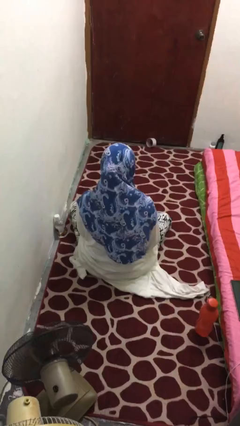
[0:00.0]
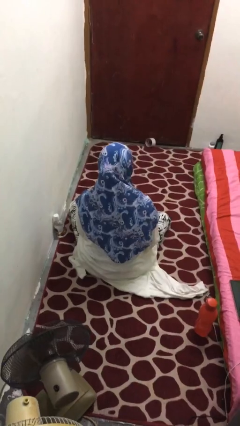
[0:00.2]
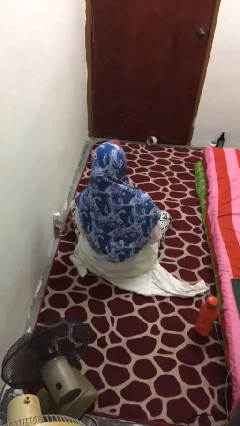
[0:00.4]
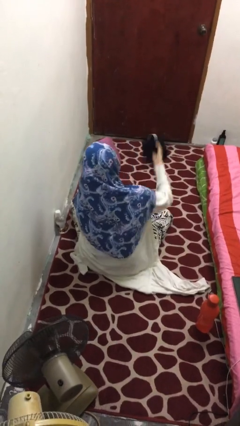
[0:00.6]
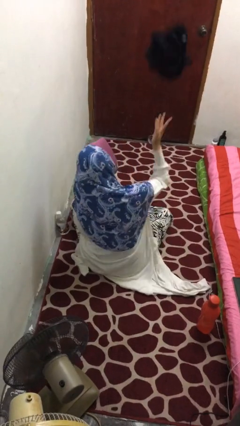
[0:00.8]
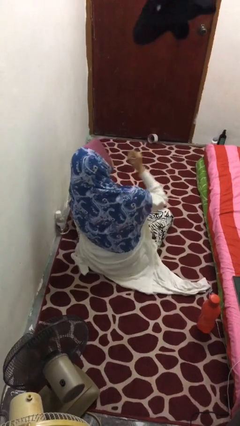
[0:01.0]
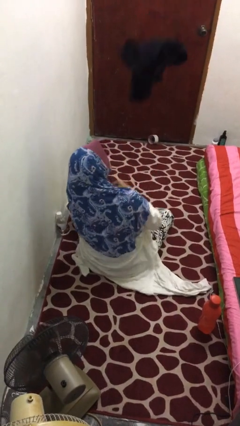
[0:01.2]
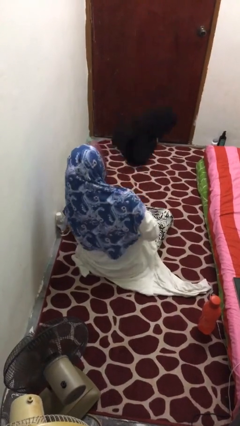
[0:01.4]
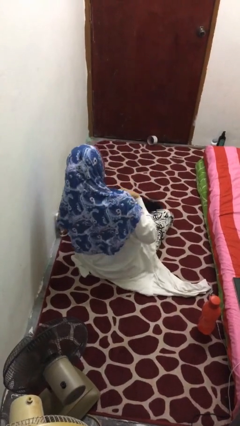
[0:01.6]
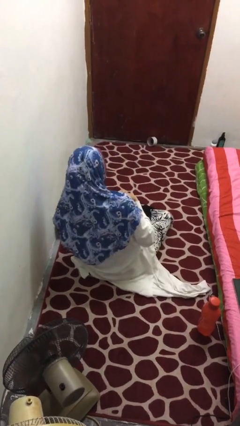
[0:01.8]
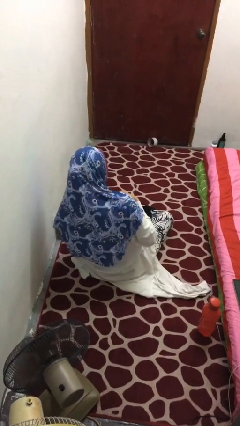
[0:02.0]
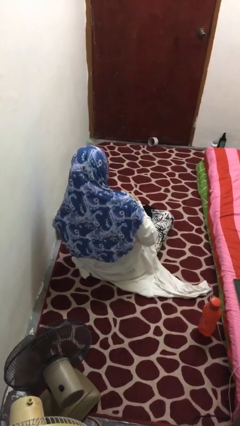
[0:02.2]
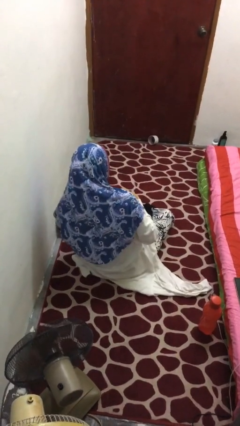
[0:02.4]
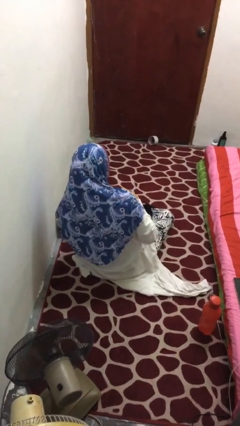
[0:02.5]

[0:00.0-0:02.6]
person throws object into air

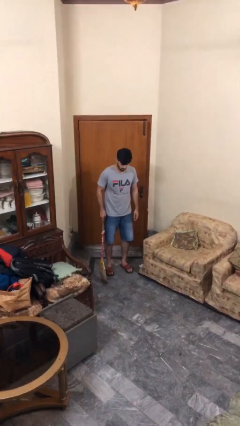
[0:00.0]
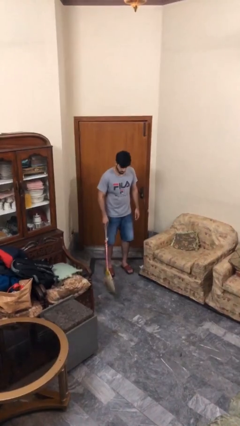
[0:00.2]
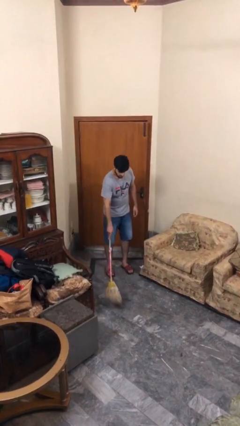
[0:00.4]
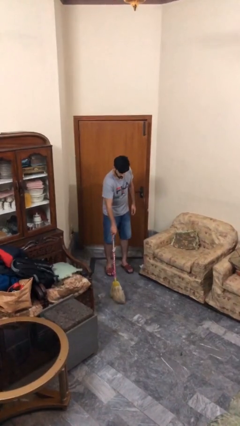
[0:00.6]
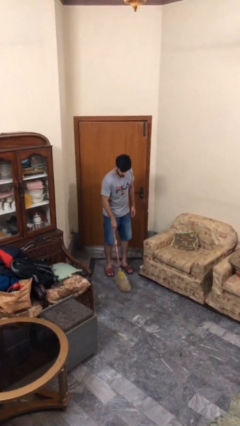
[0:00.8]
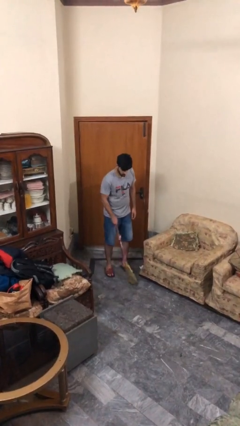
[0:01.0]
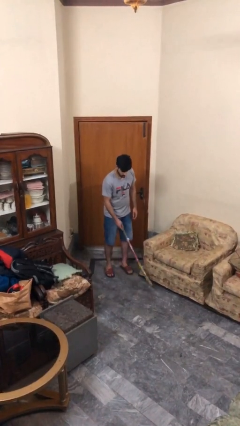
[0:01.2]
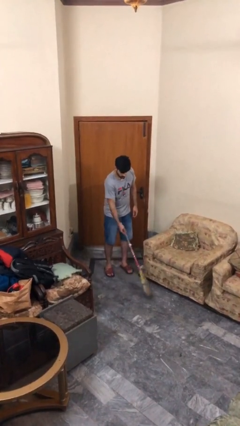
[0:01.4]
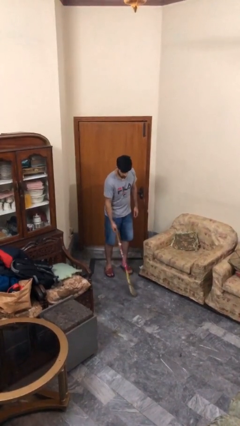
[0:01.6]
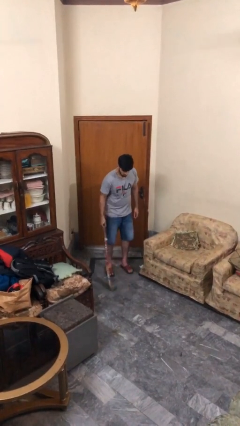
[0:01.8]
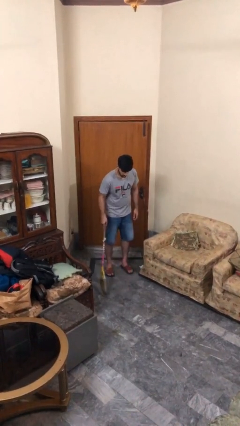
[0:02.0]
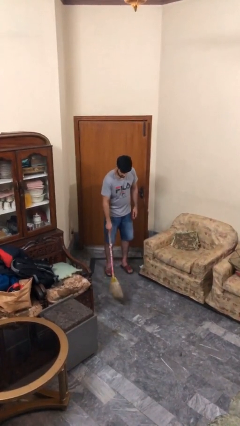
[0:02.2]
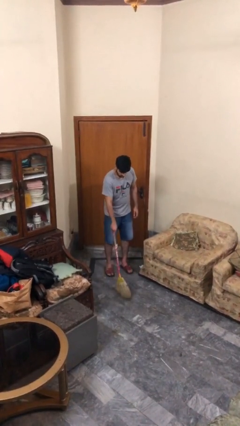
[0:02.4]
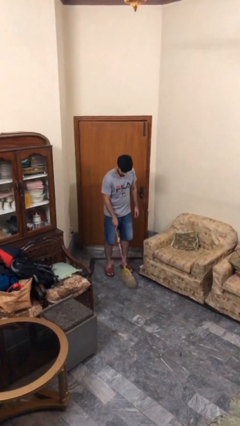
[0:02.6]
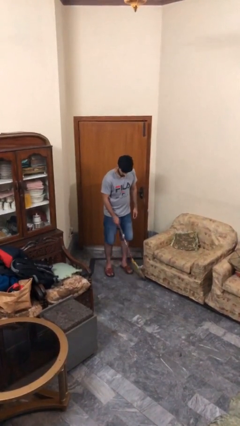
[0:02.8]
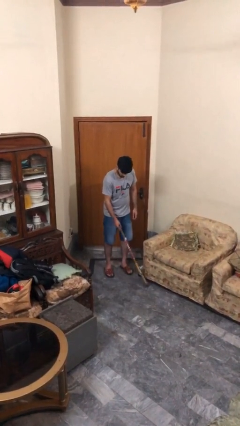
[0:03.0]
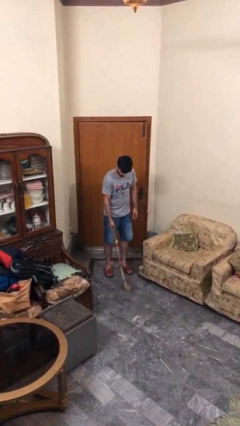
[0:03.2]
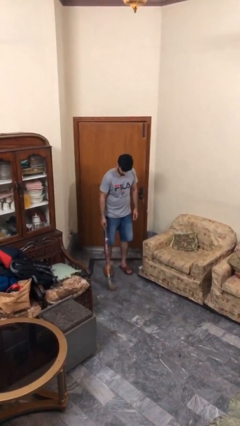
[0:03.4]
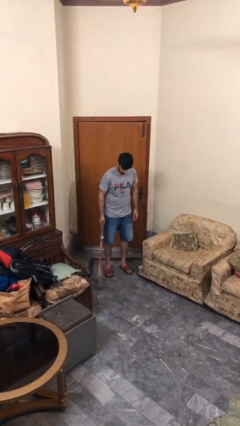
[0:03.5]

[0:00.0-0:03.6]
person sweeps floor

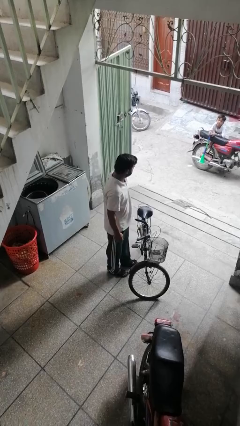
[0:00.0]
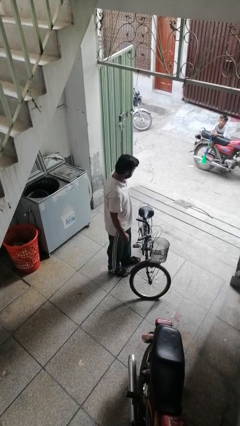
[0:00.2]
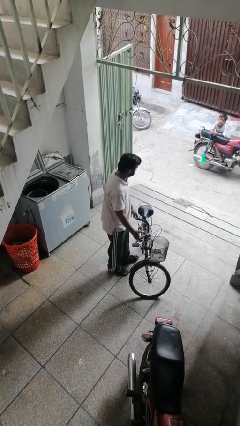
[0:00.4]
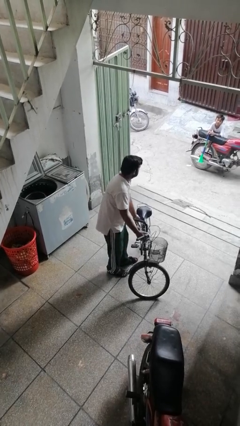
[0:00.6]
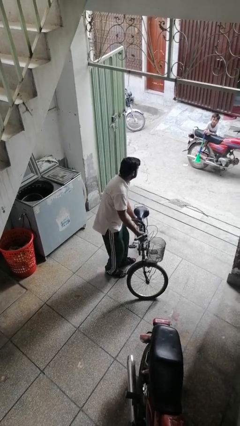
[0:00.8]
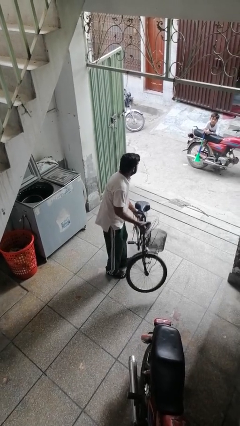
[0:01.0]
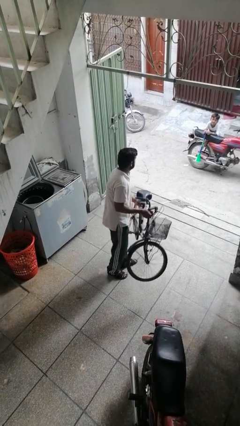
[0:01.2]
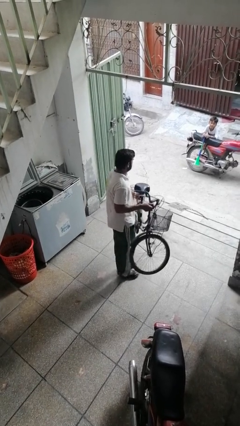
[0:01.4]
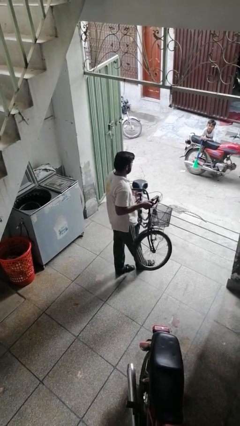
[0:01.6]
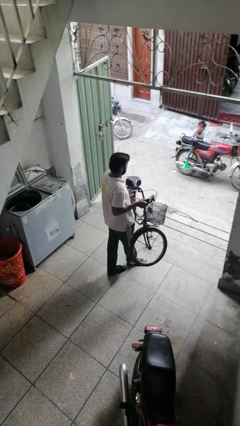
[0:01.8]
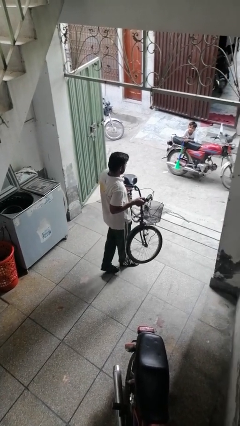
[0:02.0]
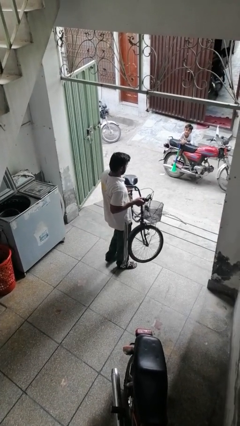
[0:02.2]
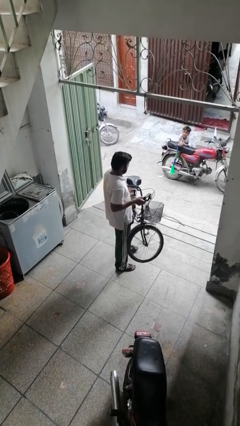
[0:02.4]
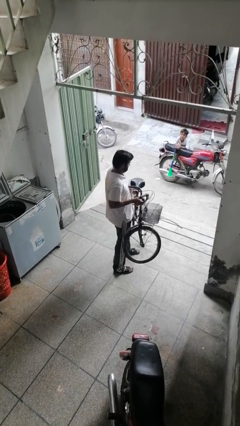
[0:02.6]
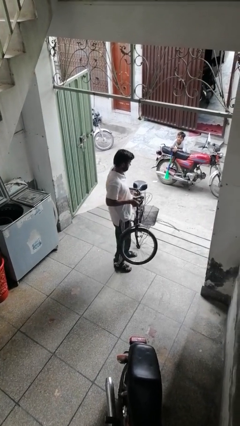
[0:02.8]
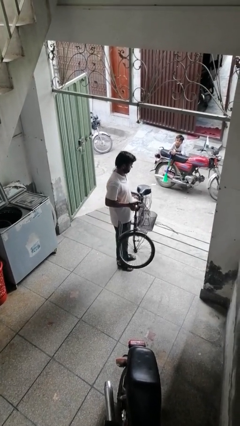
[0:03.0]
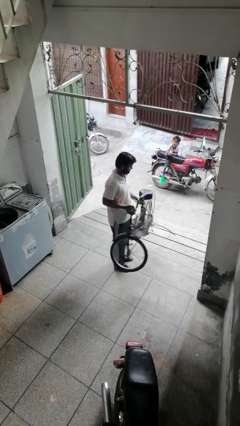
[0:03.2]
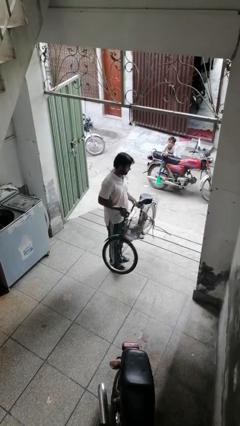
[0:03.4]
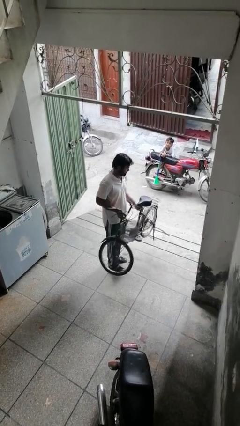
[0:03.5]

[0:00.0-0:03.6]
person carries bicycle

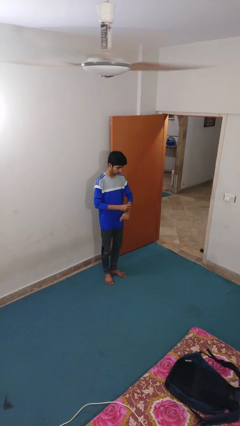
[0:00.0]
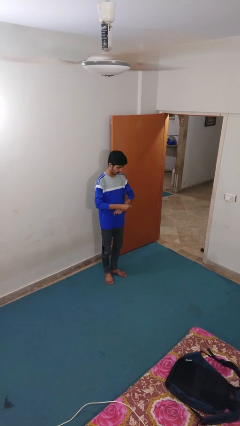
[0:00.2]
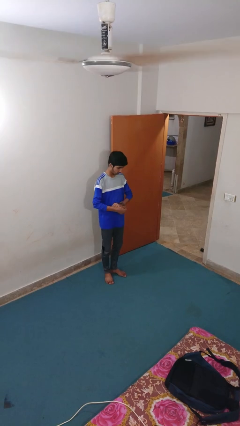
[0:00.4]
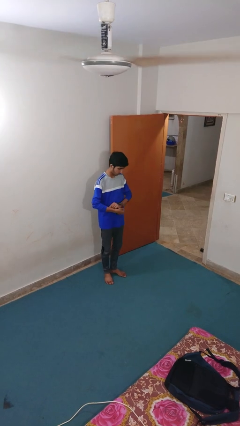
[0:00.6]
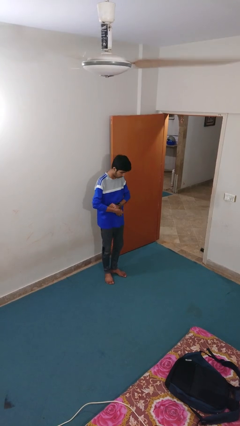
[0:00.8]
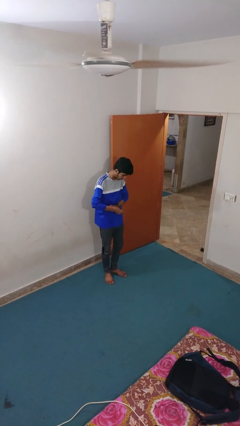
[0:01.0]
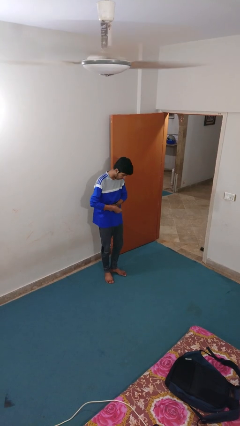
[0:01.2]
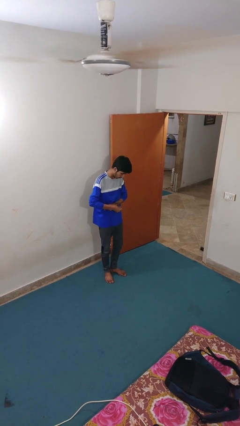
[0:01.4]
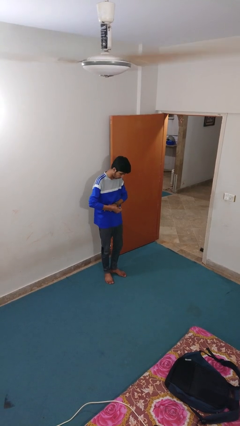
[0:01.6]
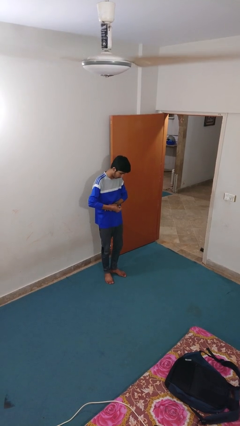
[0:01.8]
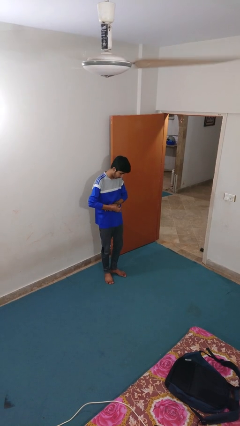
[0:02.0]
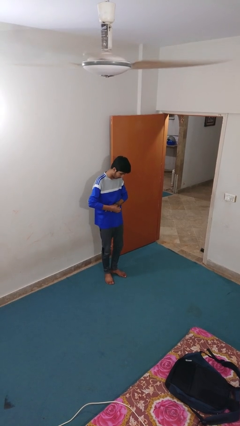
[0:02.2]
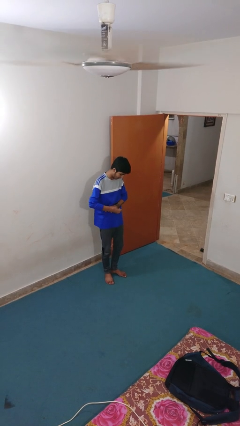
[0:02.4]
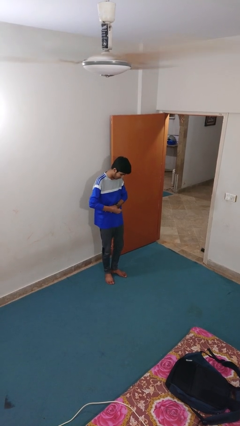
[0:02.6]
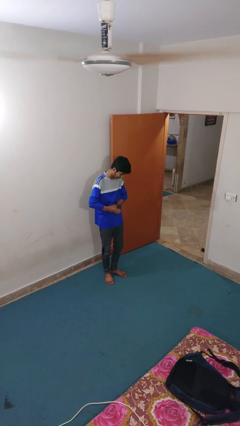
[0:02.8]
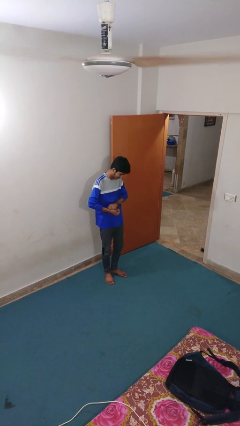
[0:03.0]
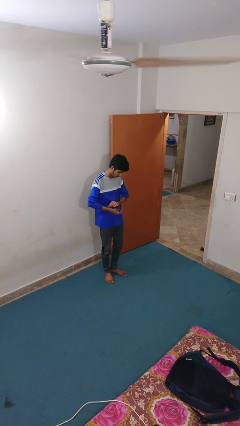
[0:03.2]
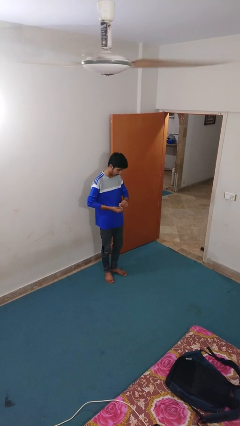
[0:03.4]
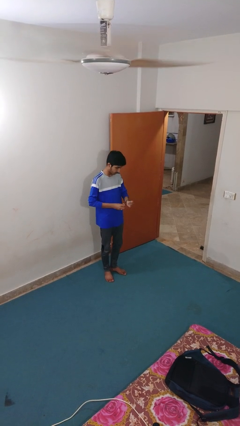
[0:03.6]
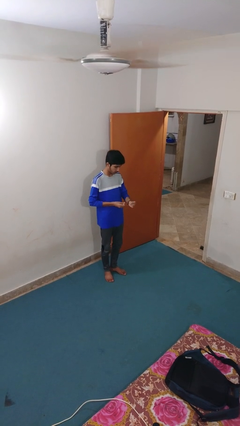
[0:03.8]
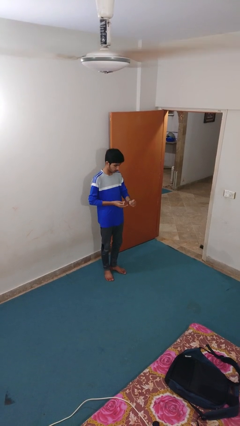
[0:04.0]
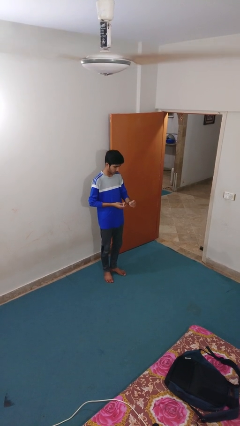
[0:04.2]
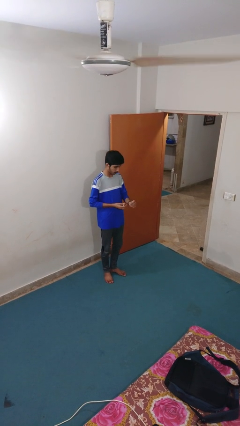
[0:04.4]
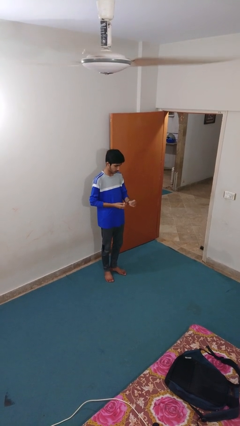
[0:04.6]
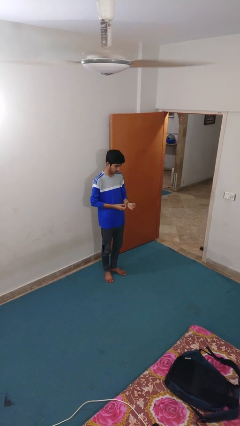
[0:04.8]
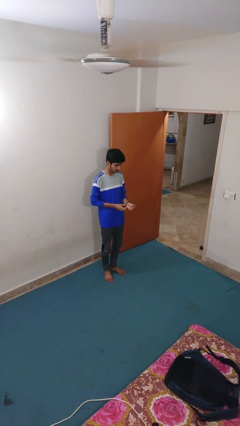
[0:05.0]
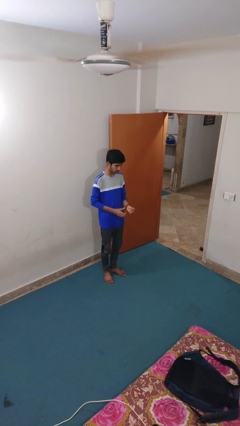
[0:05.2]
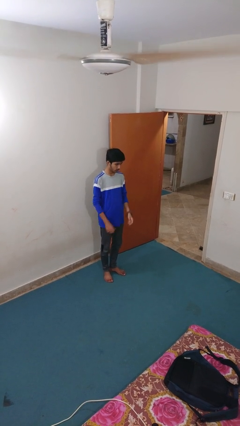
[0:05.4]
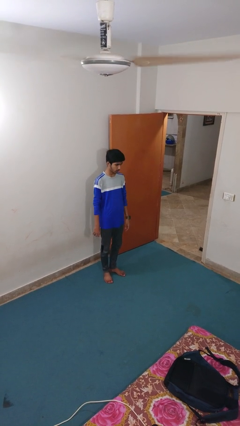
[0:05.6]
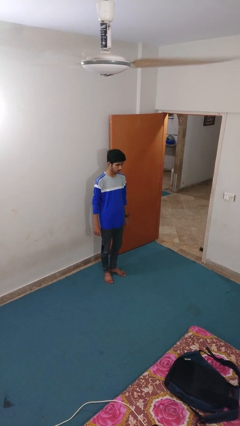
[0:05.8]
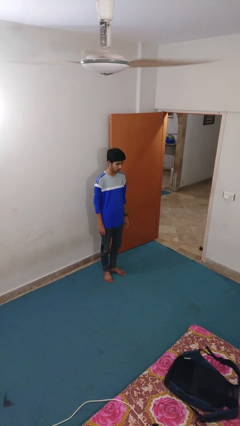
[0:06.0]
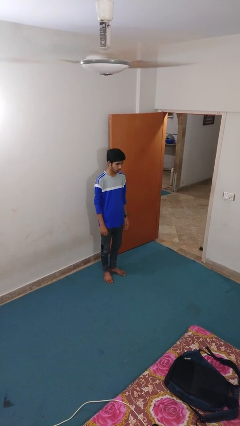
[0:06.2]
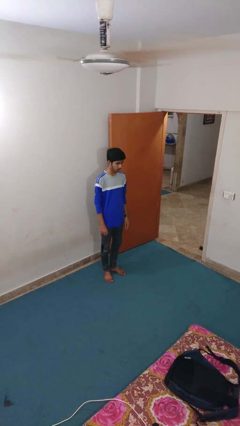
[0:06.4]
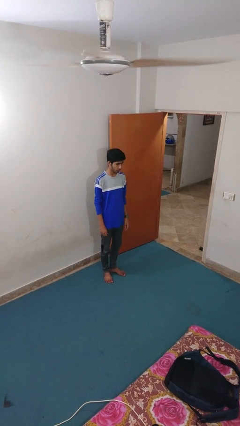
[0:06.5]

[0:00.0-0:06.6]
person puts on wristwatch

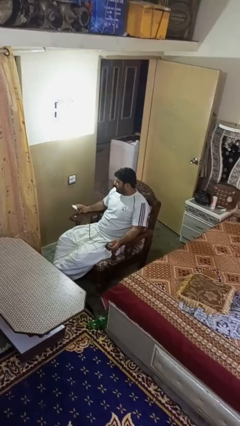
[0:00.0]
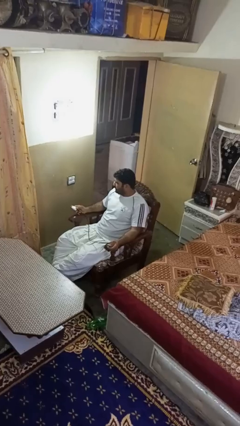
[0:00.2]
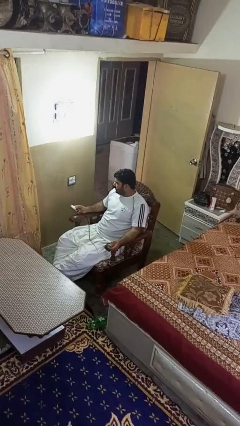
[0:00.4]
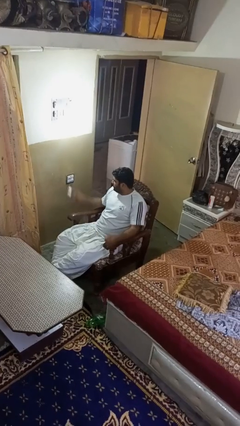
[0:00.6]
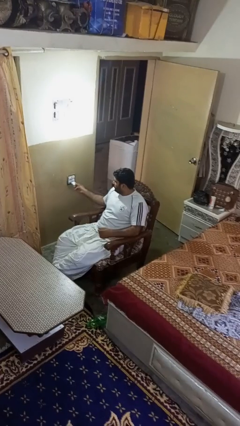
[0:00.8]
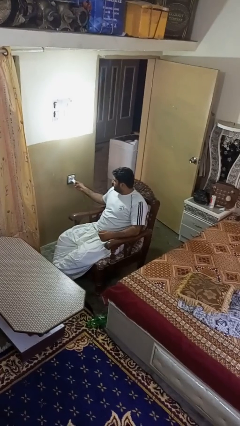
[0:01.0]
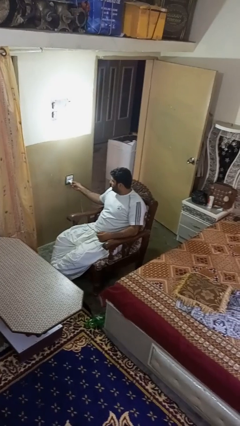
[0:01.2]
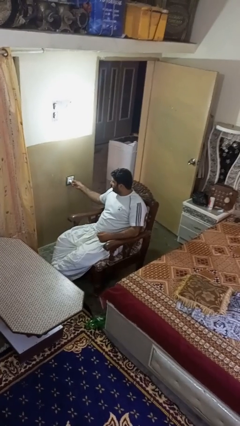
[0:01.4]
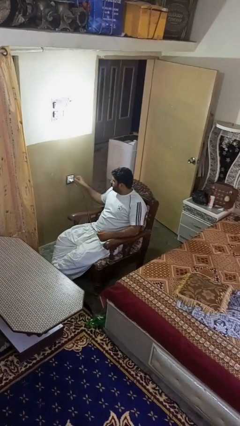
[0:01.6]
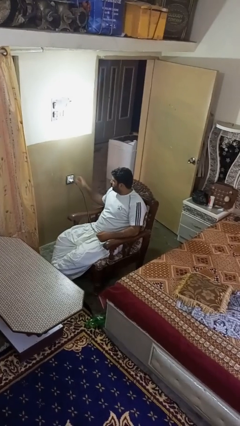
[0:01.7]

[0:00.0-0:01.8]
person plugs into electrical socket
